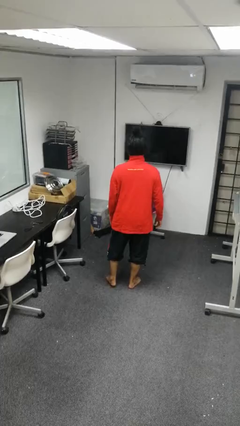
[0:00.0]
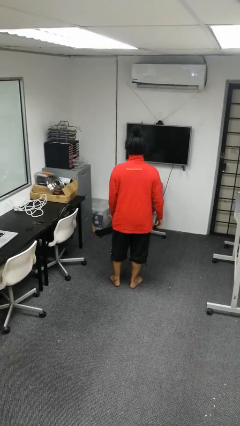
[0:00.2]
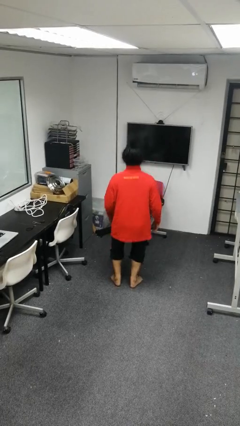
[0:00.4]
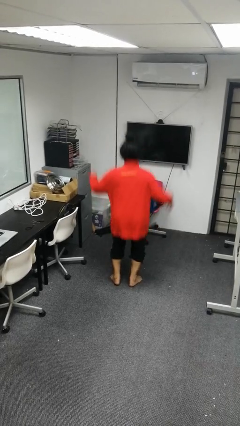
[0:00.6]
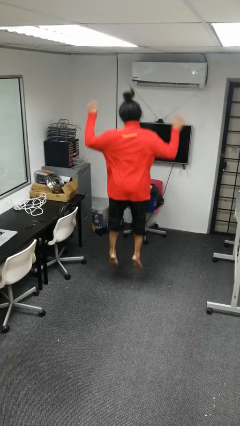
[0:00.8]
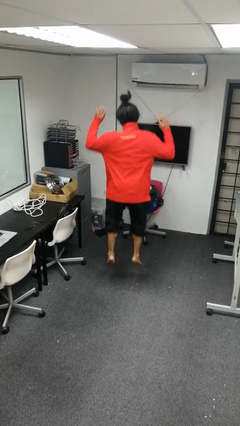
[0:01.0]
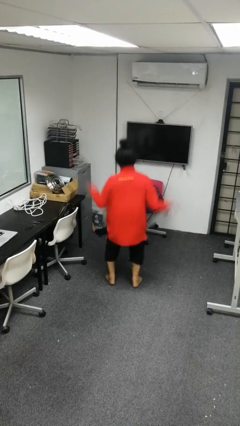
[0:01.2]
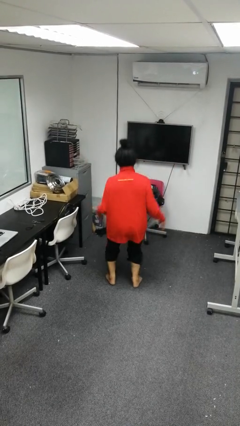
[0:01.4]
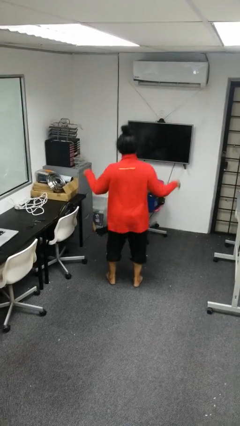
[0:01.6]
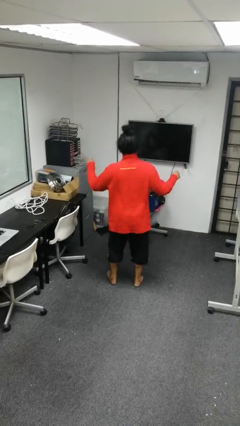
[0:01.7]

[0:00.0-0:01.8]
person jumps

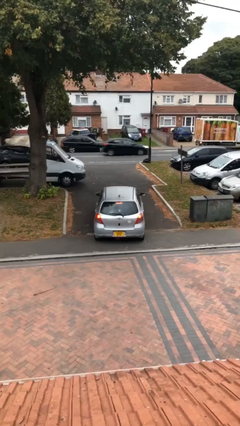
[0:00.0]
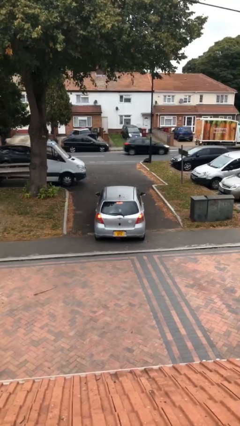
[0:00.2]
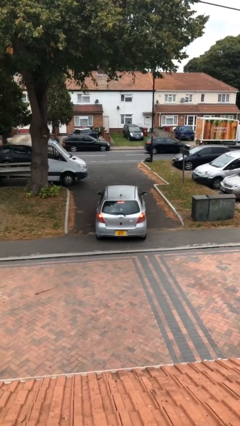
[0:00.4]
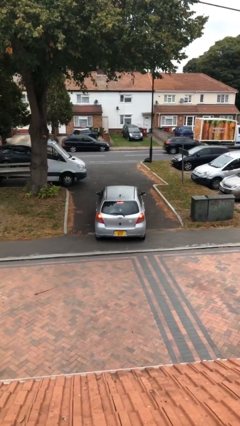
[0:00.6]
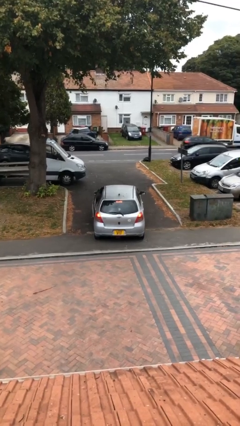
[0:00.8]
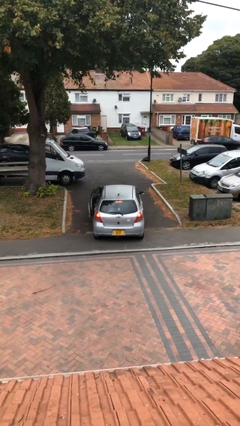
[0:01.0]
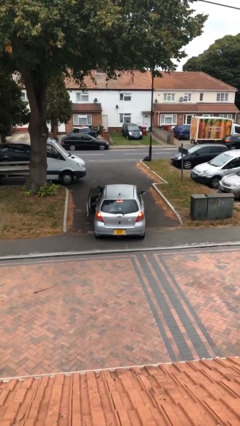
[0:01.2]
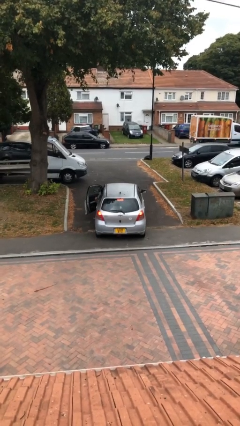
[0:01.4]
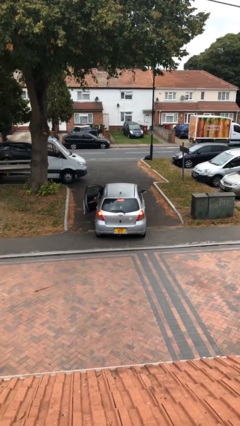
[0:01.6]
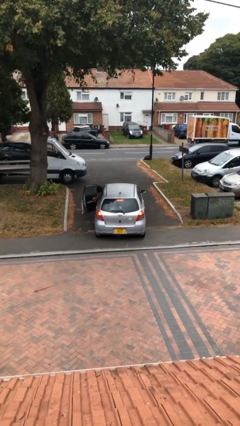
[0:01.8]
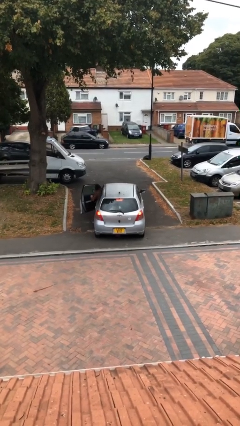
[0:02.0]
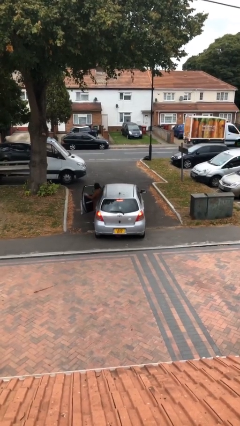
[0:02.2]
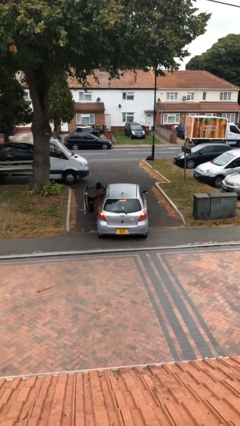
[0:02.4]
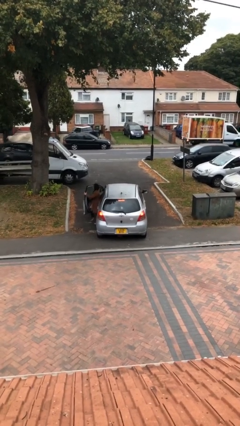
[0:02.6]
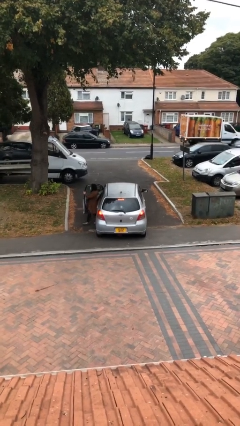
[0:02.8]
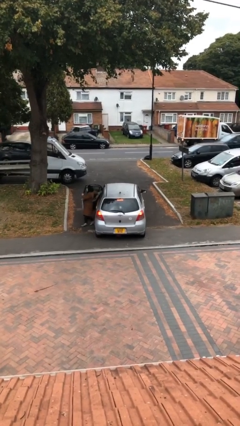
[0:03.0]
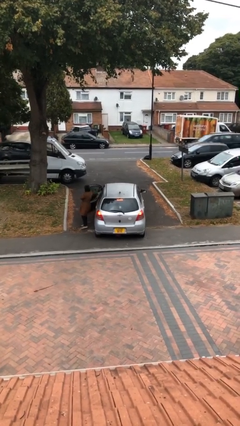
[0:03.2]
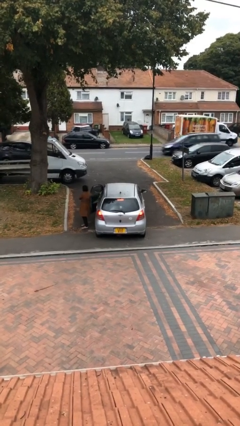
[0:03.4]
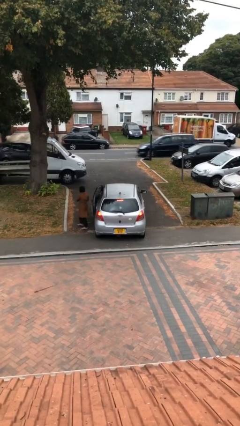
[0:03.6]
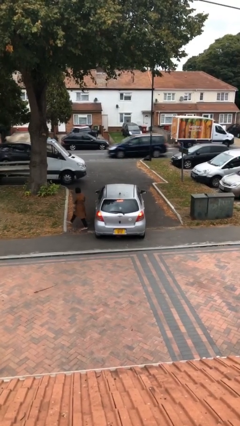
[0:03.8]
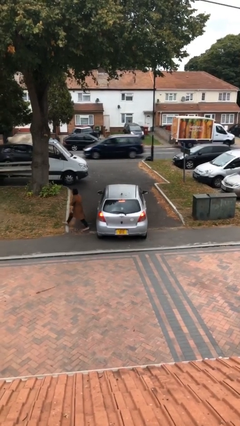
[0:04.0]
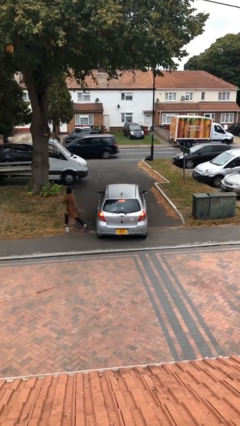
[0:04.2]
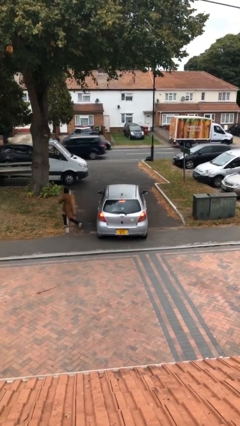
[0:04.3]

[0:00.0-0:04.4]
car drops off person

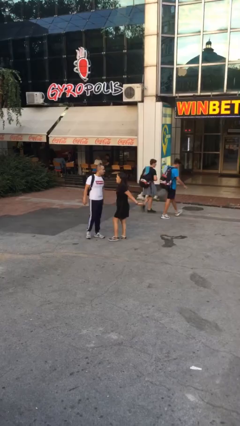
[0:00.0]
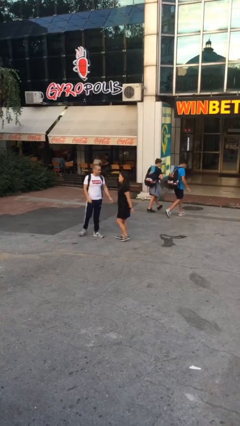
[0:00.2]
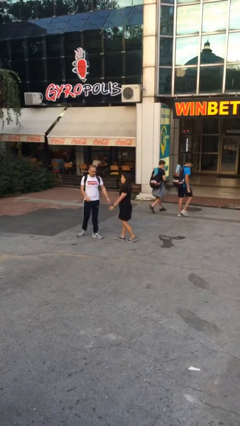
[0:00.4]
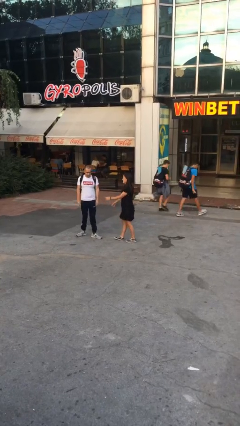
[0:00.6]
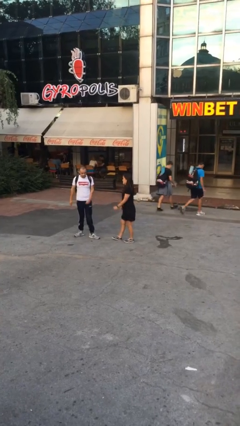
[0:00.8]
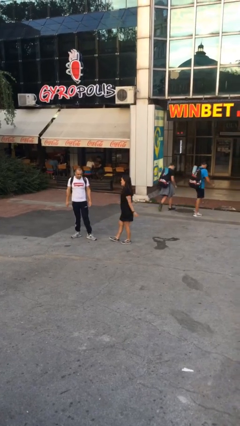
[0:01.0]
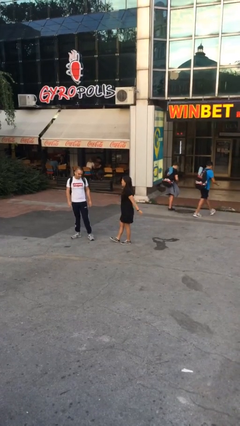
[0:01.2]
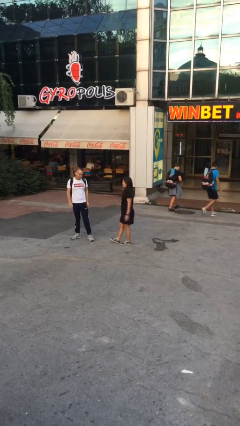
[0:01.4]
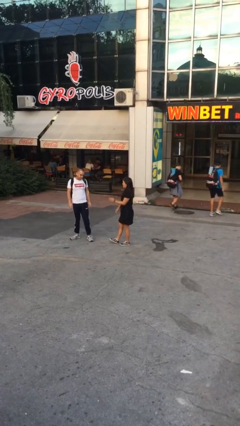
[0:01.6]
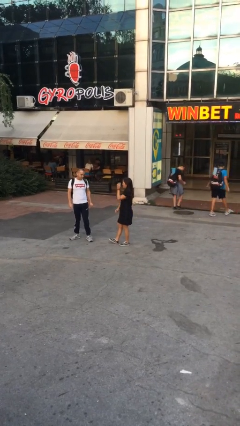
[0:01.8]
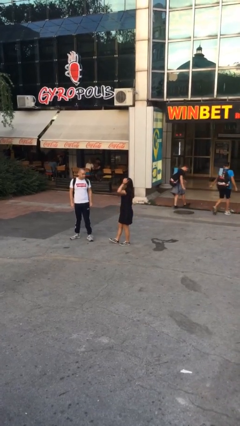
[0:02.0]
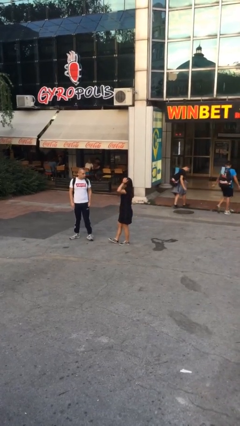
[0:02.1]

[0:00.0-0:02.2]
person talks to person

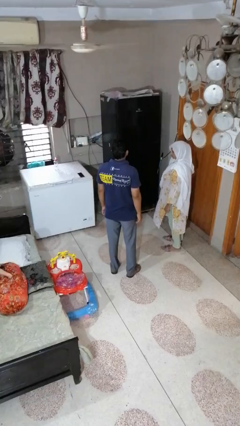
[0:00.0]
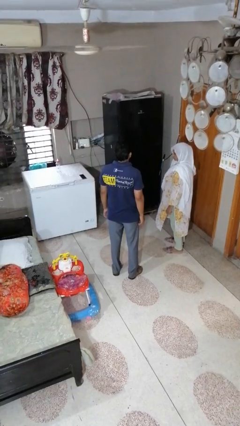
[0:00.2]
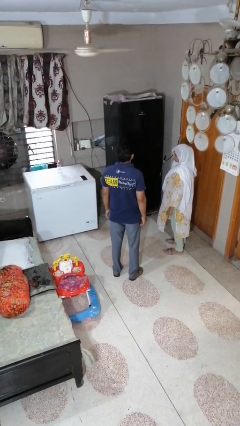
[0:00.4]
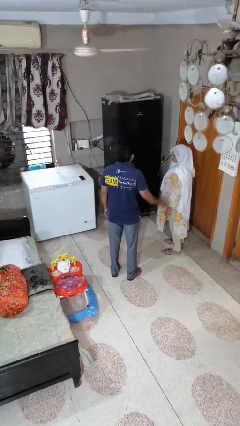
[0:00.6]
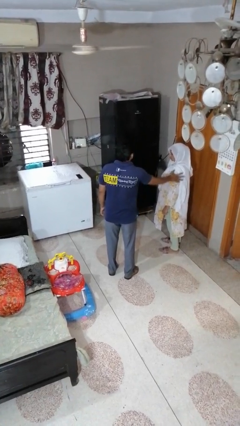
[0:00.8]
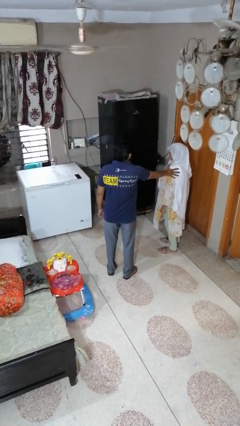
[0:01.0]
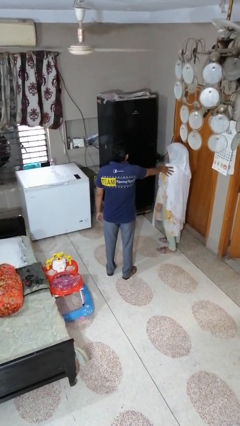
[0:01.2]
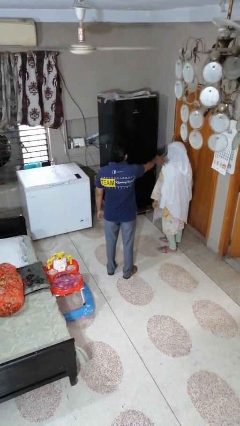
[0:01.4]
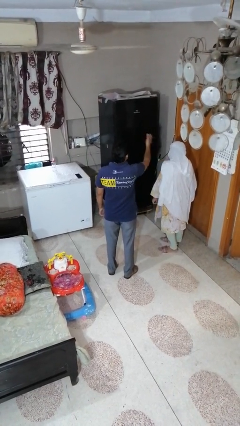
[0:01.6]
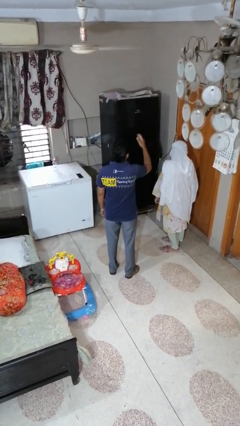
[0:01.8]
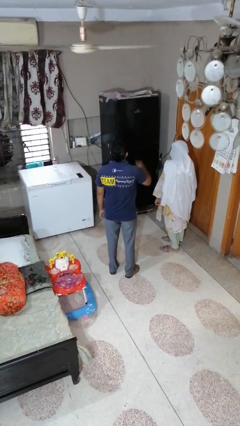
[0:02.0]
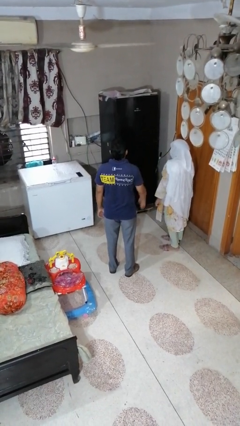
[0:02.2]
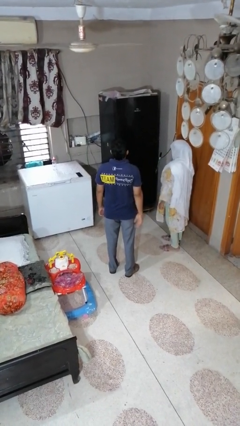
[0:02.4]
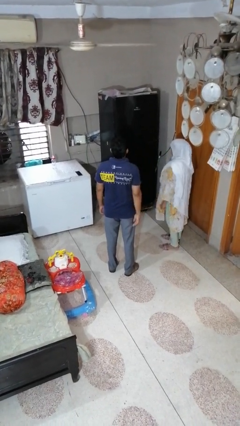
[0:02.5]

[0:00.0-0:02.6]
person shoves person

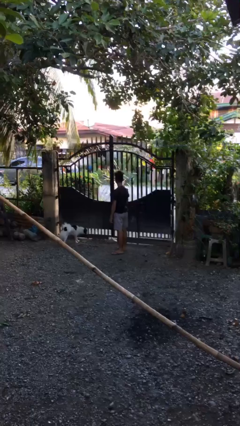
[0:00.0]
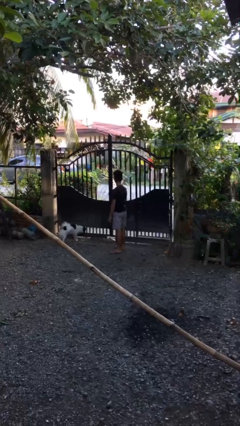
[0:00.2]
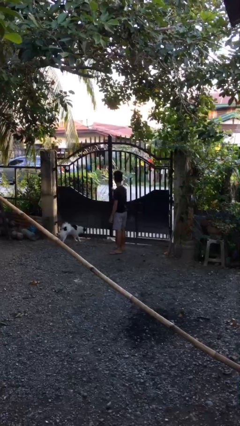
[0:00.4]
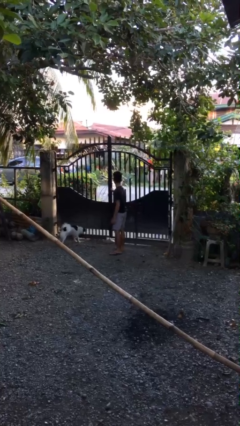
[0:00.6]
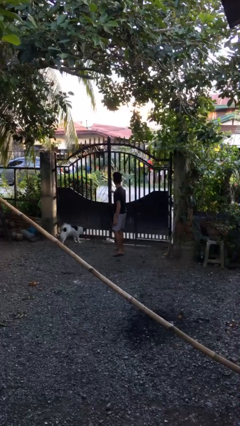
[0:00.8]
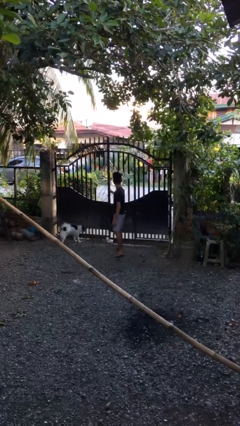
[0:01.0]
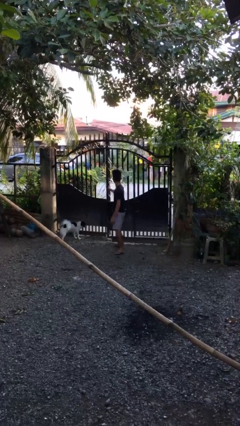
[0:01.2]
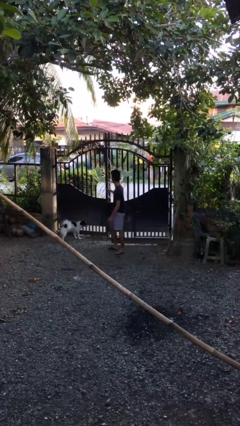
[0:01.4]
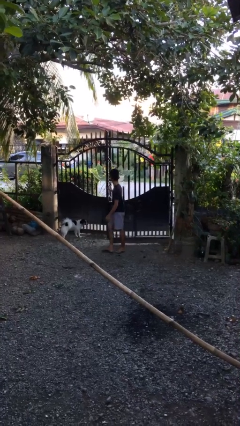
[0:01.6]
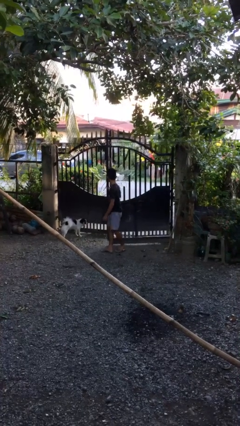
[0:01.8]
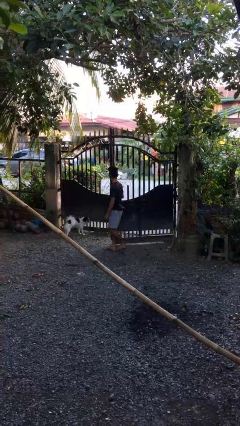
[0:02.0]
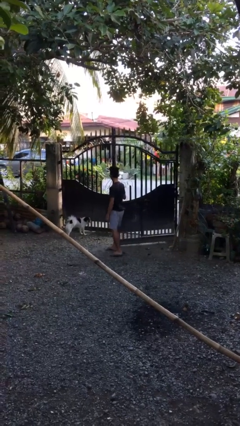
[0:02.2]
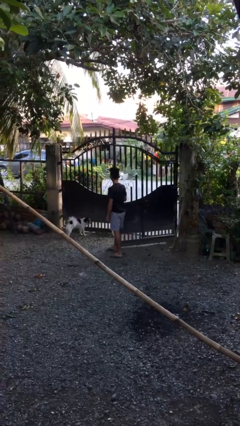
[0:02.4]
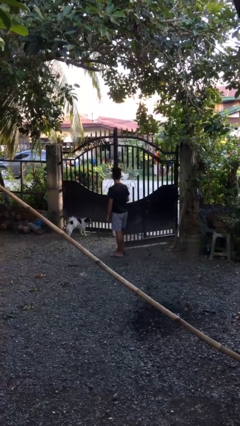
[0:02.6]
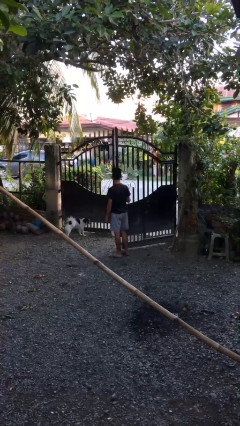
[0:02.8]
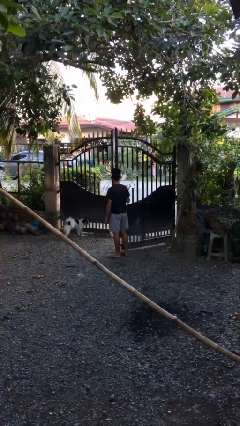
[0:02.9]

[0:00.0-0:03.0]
person opens gate

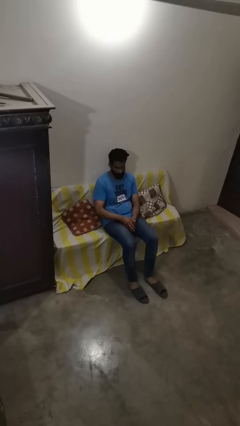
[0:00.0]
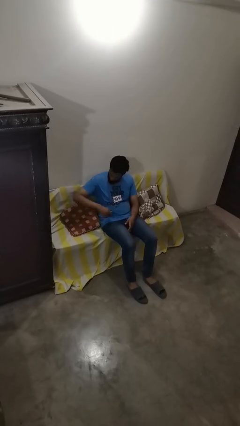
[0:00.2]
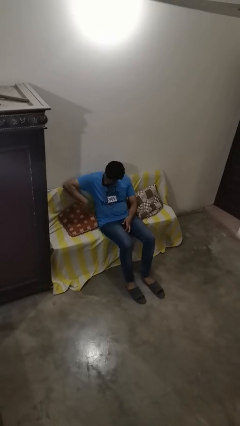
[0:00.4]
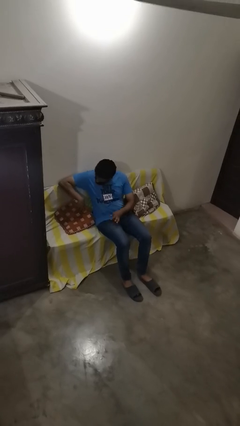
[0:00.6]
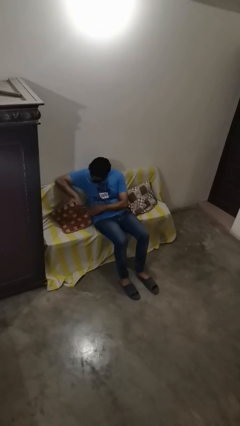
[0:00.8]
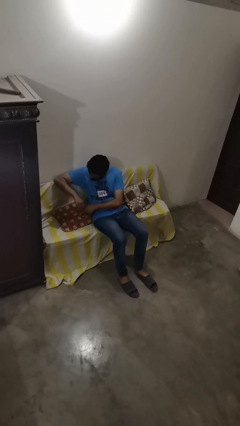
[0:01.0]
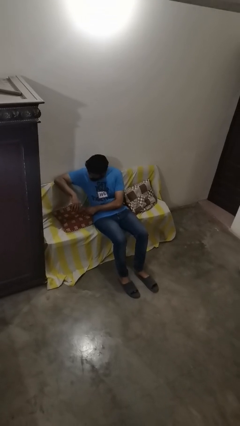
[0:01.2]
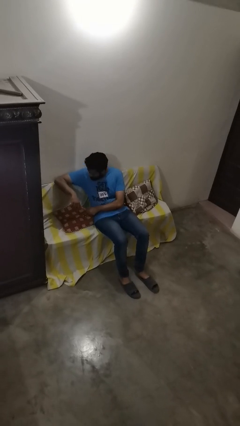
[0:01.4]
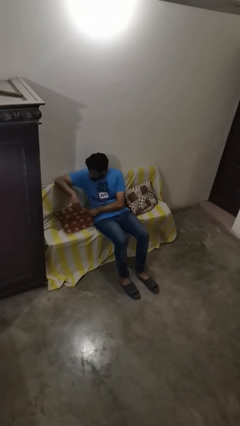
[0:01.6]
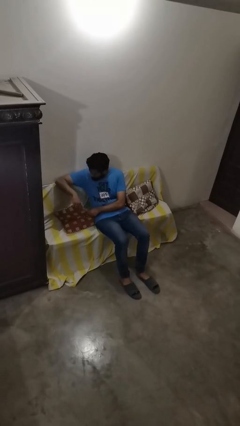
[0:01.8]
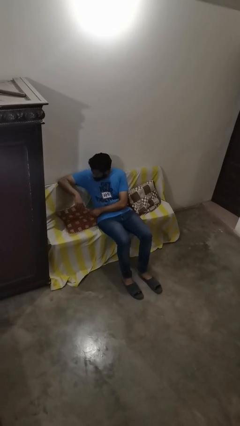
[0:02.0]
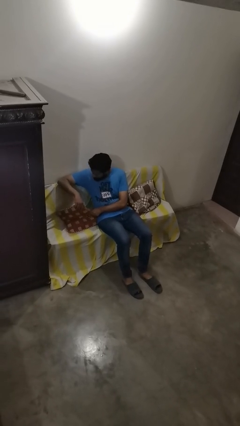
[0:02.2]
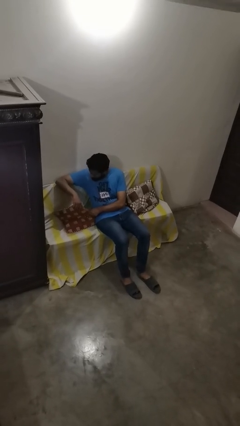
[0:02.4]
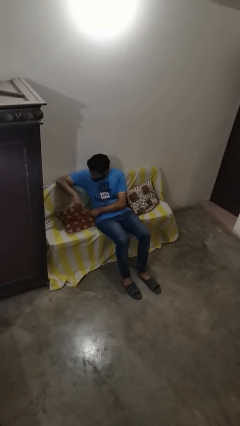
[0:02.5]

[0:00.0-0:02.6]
person searches in couch

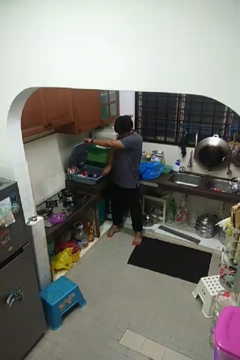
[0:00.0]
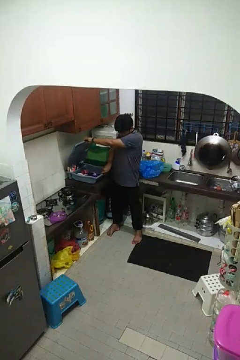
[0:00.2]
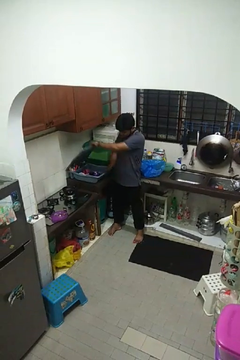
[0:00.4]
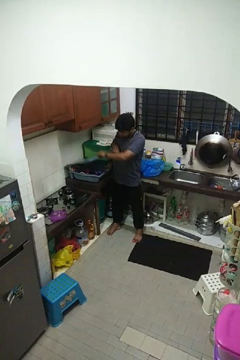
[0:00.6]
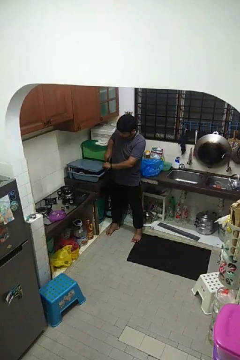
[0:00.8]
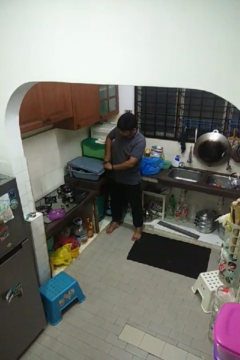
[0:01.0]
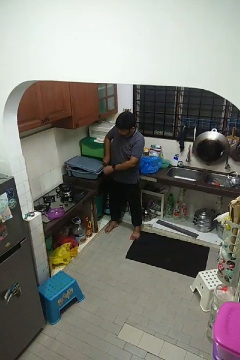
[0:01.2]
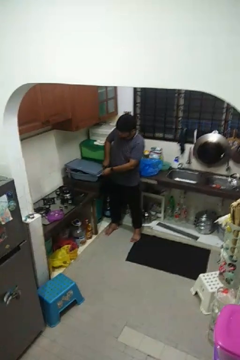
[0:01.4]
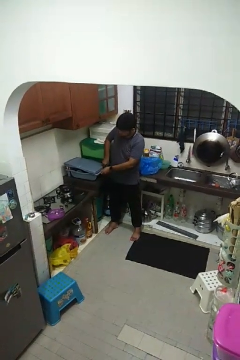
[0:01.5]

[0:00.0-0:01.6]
person closes dishwasher
